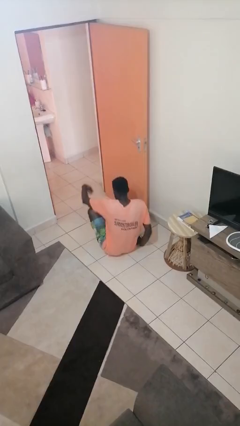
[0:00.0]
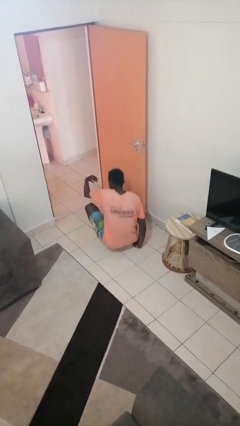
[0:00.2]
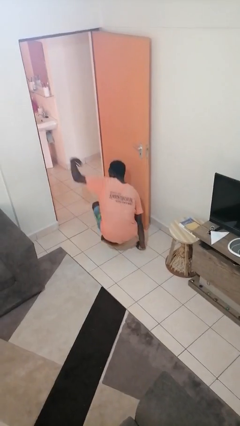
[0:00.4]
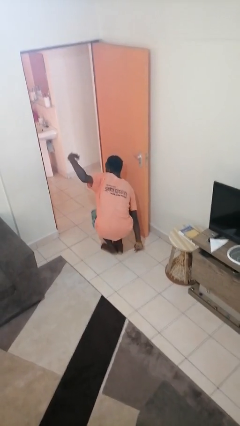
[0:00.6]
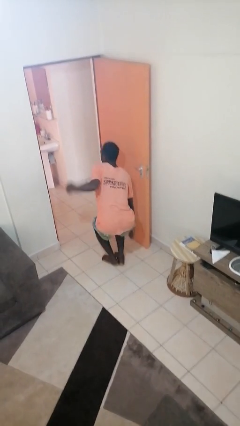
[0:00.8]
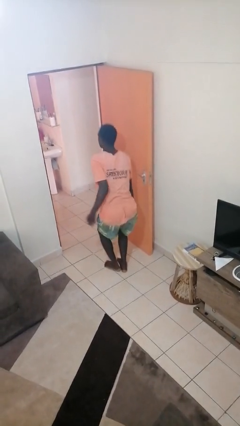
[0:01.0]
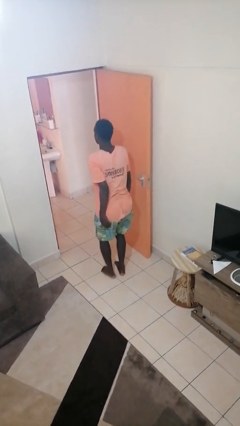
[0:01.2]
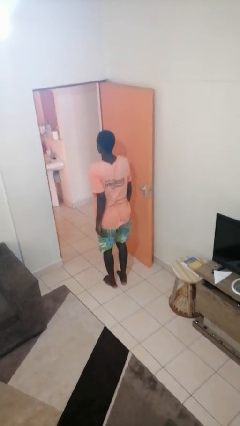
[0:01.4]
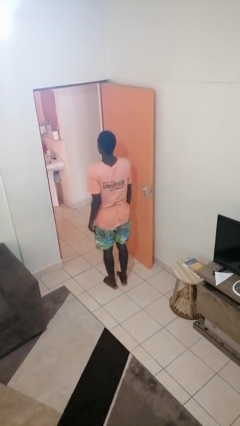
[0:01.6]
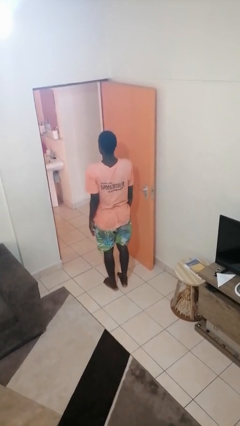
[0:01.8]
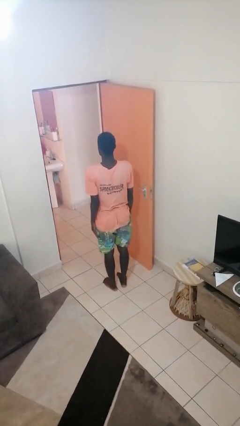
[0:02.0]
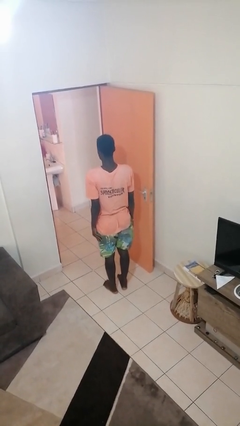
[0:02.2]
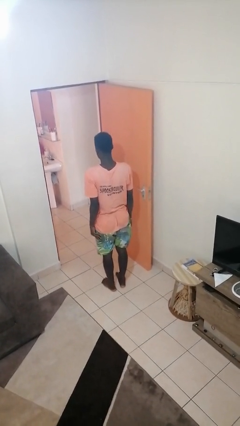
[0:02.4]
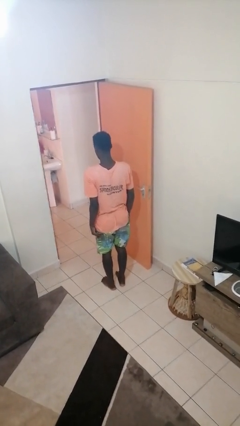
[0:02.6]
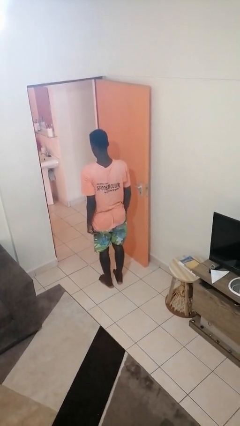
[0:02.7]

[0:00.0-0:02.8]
person stands up from floor

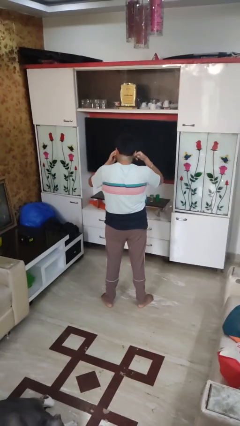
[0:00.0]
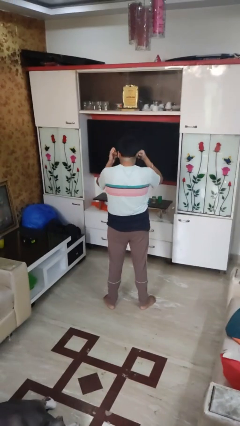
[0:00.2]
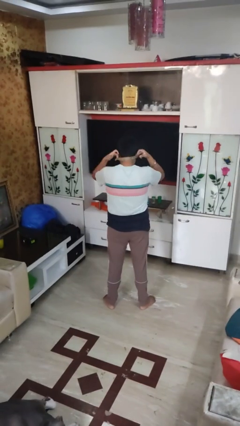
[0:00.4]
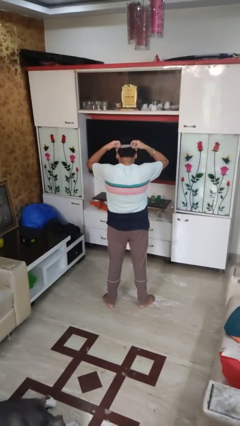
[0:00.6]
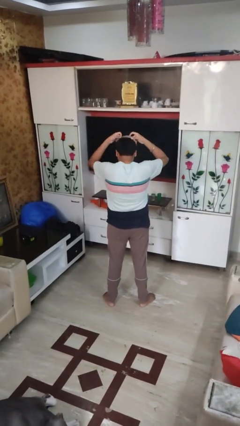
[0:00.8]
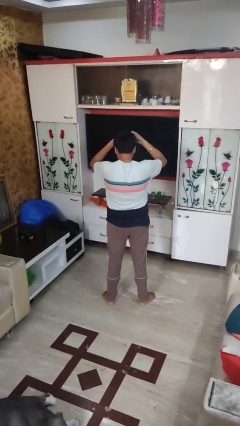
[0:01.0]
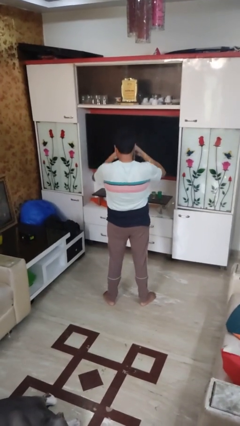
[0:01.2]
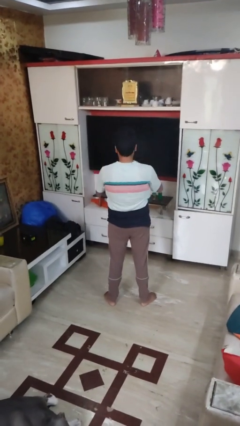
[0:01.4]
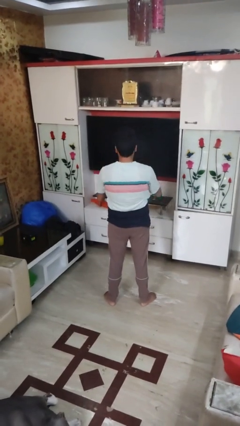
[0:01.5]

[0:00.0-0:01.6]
person takes off necktie

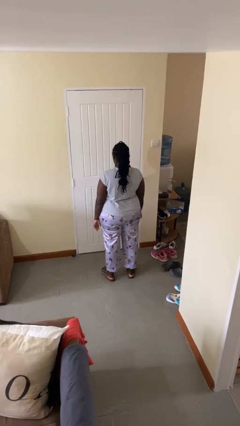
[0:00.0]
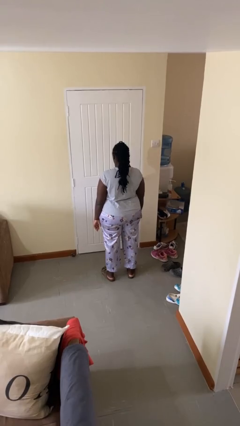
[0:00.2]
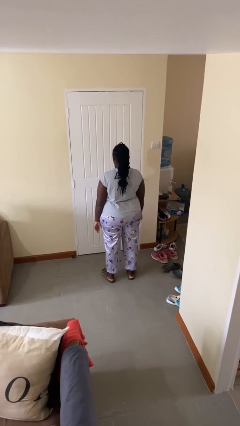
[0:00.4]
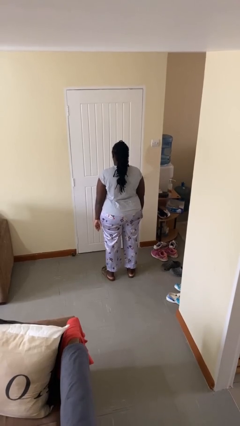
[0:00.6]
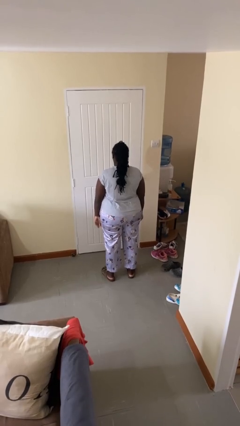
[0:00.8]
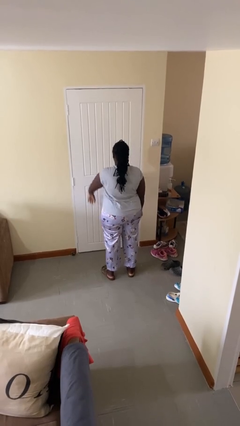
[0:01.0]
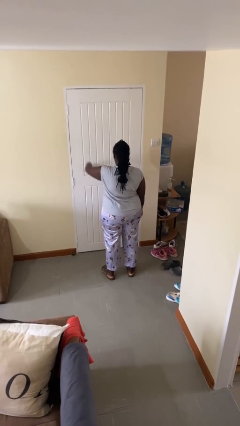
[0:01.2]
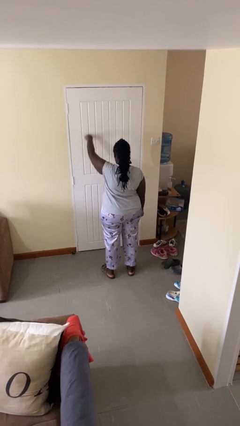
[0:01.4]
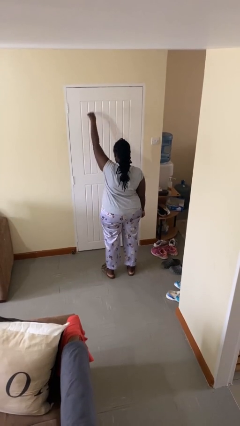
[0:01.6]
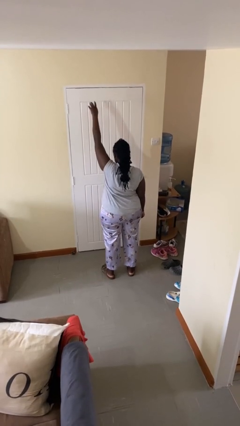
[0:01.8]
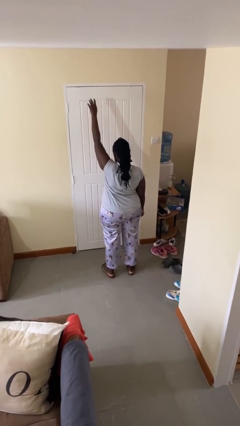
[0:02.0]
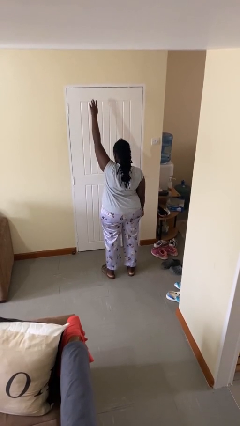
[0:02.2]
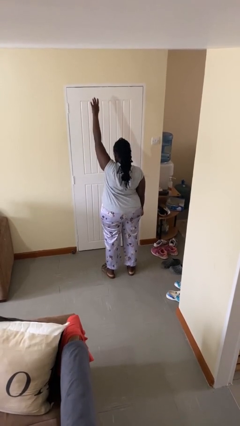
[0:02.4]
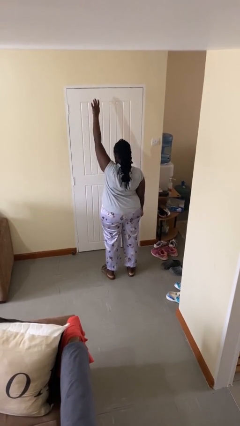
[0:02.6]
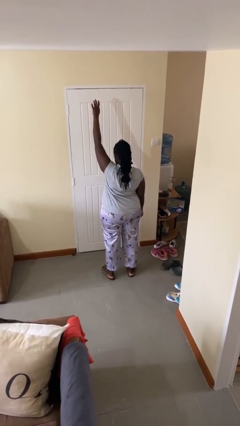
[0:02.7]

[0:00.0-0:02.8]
person gestures swipe up

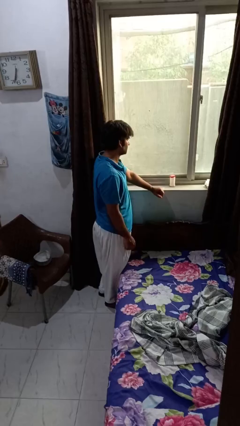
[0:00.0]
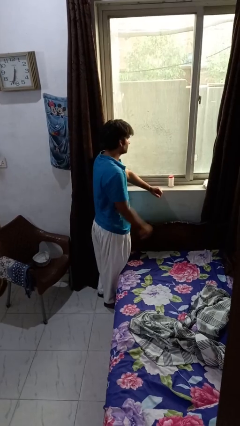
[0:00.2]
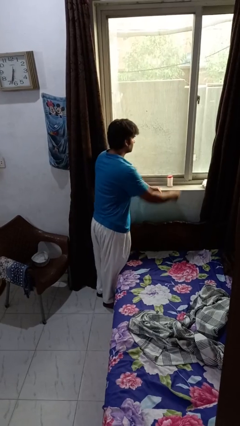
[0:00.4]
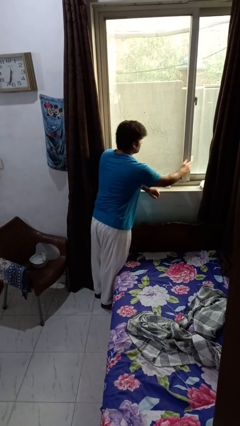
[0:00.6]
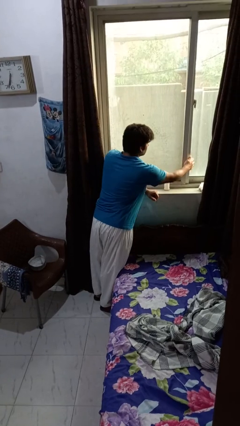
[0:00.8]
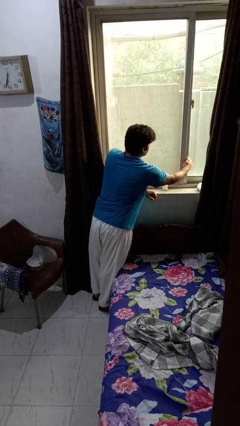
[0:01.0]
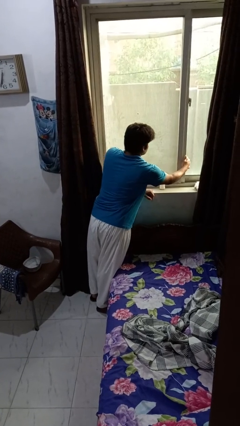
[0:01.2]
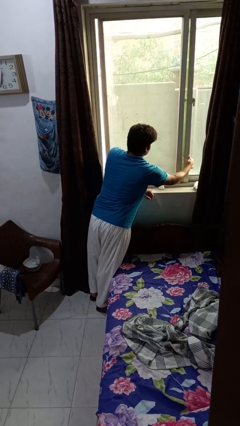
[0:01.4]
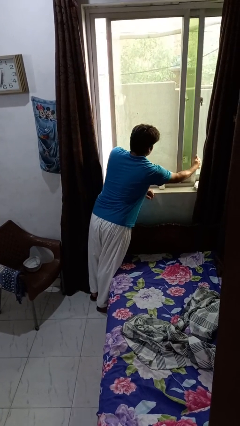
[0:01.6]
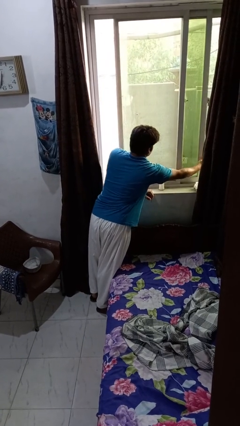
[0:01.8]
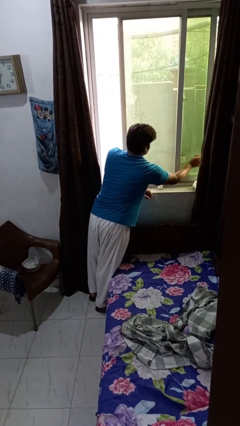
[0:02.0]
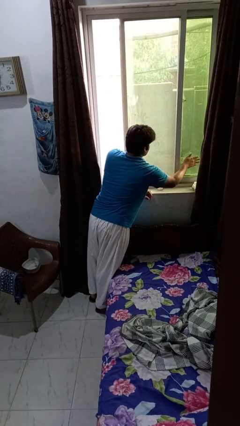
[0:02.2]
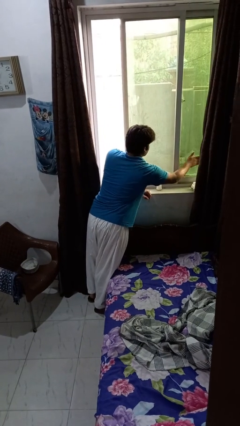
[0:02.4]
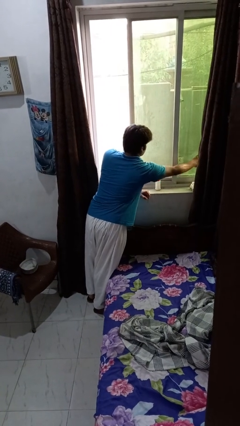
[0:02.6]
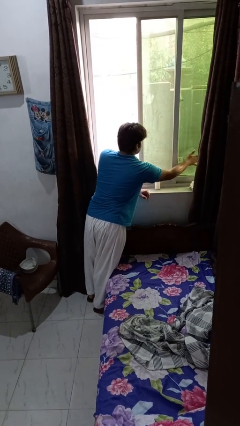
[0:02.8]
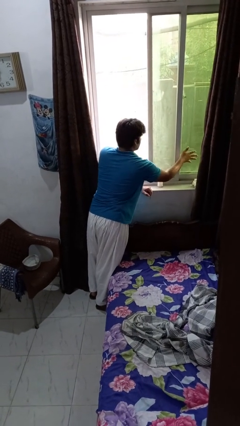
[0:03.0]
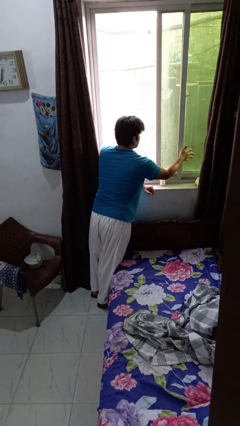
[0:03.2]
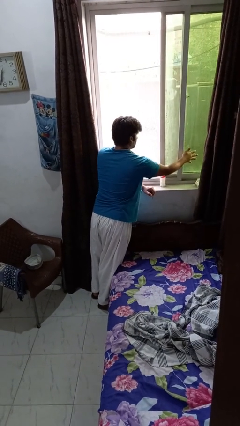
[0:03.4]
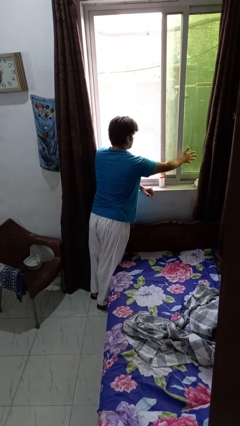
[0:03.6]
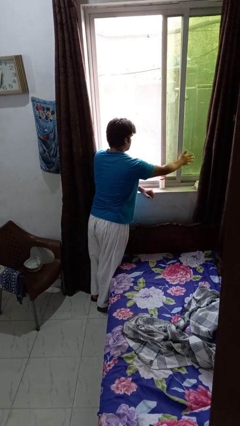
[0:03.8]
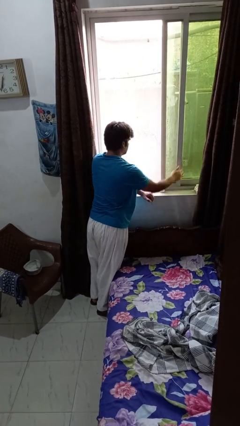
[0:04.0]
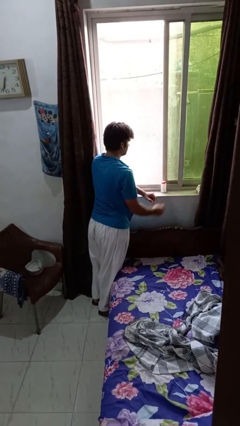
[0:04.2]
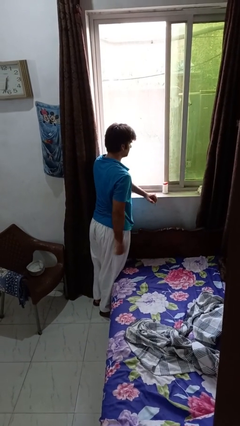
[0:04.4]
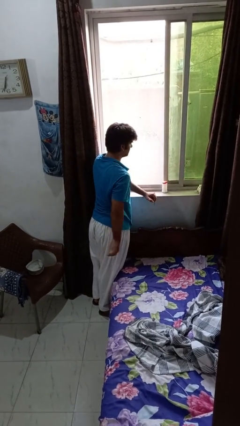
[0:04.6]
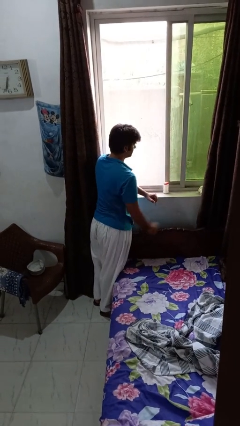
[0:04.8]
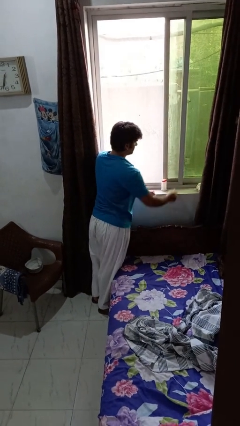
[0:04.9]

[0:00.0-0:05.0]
person opens home window

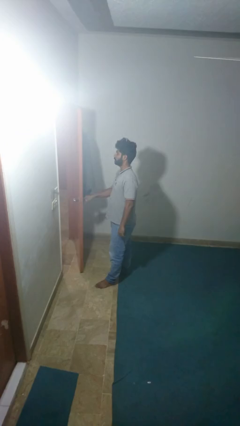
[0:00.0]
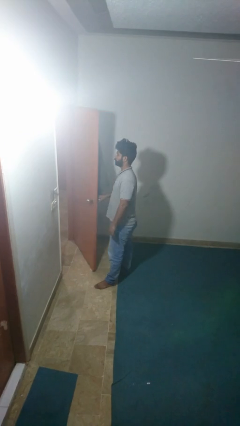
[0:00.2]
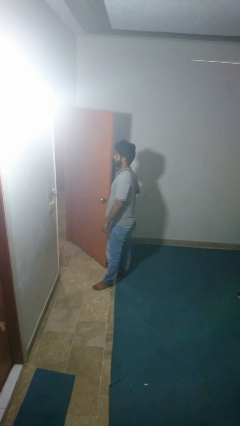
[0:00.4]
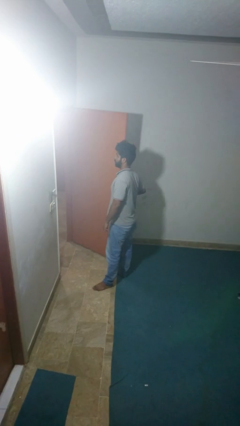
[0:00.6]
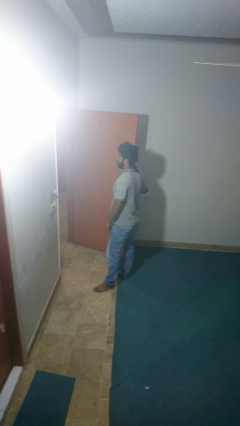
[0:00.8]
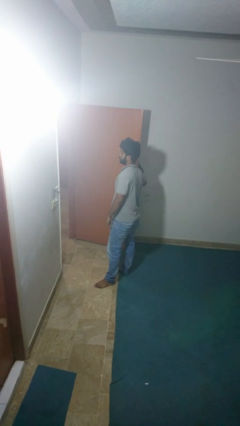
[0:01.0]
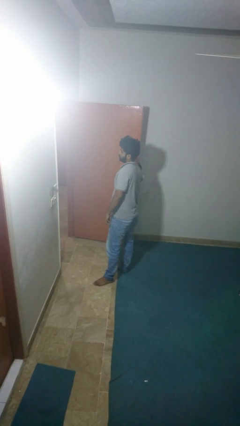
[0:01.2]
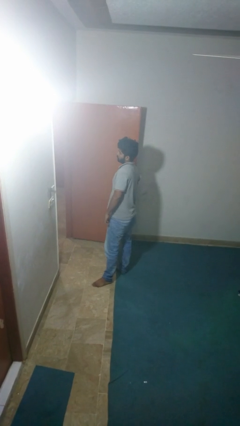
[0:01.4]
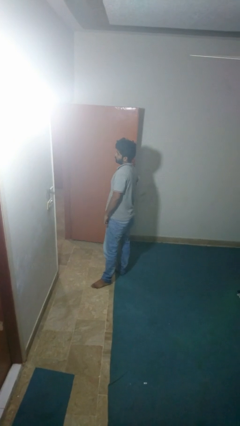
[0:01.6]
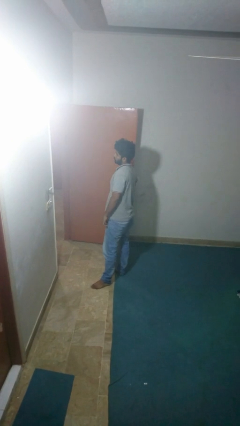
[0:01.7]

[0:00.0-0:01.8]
person opens facility door

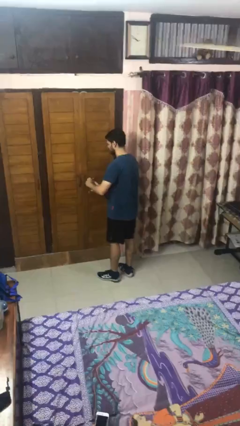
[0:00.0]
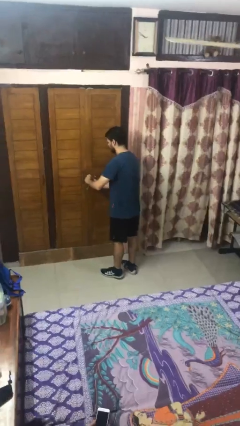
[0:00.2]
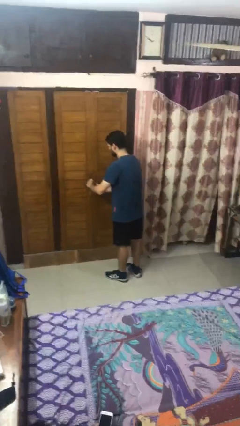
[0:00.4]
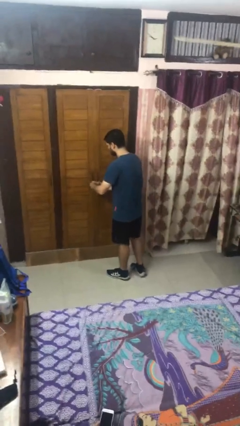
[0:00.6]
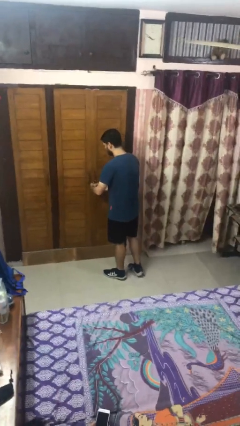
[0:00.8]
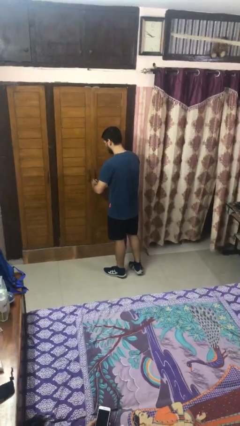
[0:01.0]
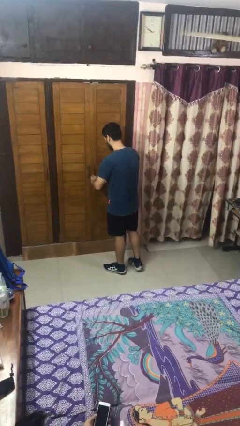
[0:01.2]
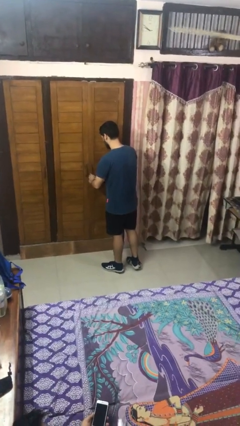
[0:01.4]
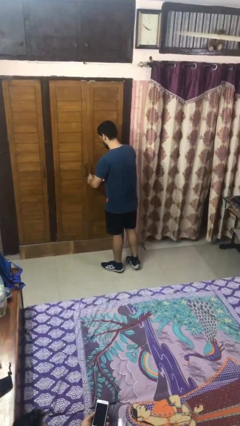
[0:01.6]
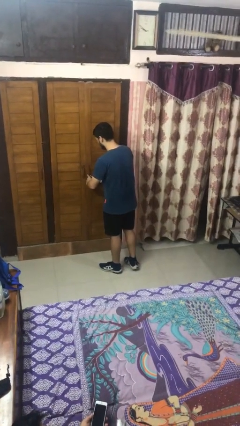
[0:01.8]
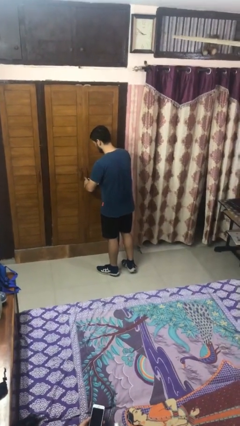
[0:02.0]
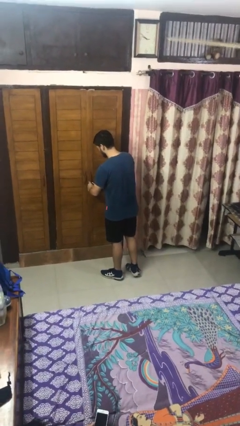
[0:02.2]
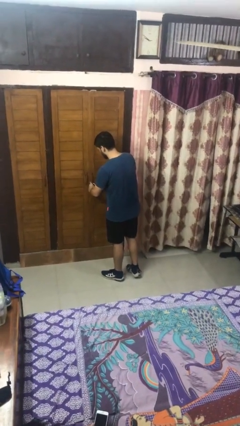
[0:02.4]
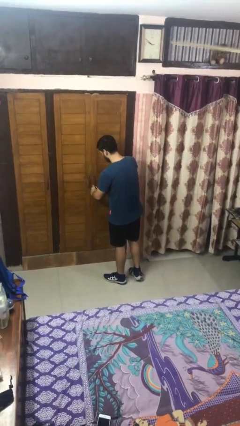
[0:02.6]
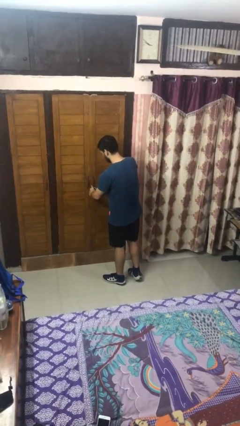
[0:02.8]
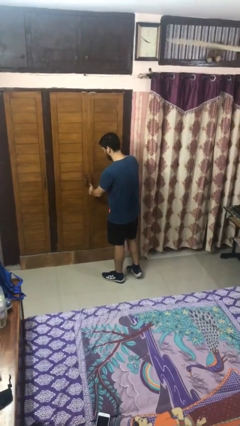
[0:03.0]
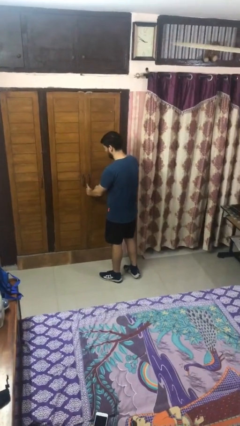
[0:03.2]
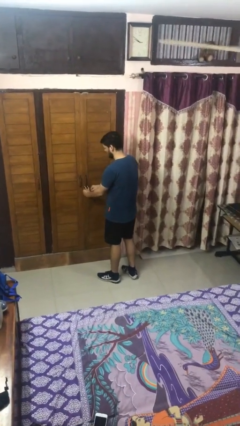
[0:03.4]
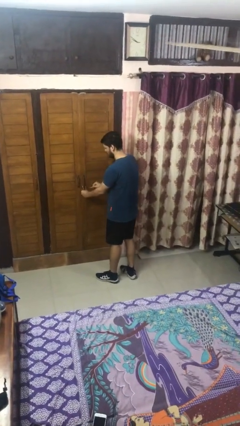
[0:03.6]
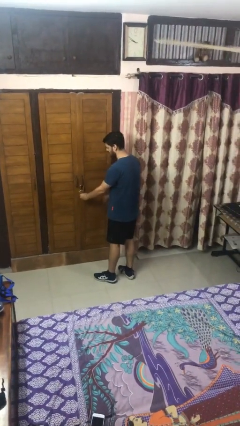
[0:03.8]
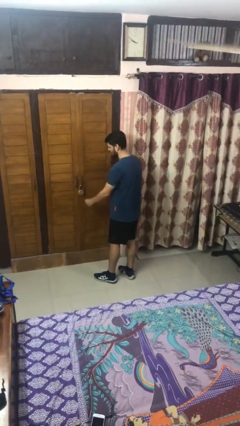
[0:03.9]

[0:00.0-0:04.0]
person locks door with keys
